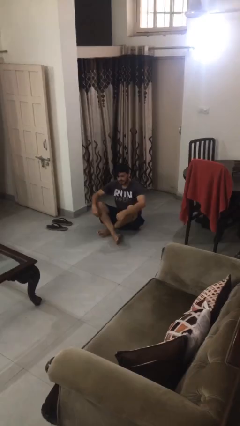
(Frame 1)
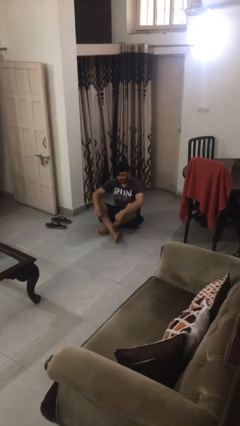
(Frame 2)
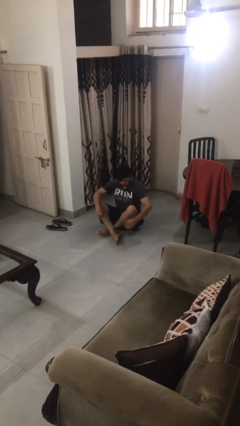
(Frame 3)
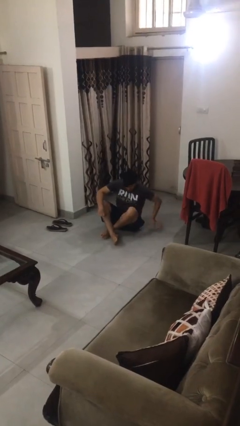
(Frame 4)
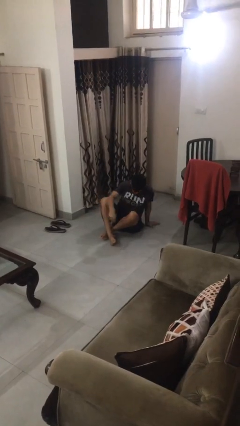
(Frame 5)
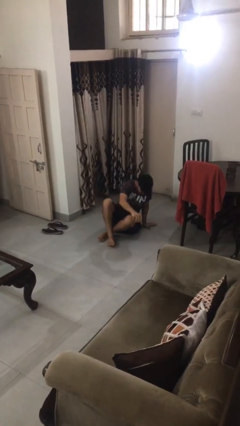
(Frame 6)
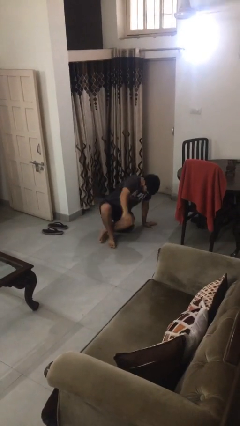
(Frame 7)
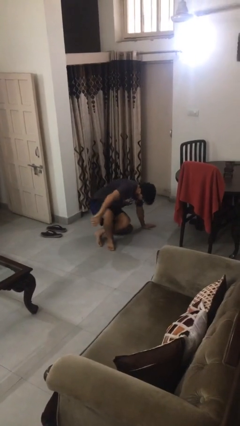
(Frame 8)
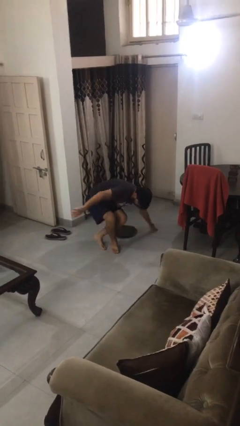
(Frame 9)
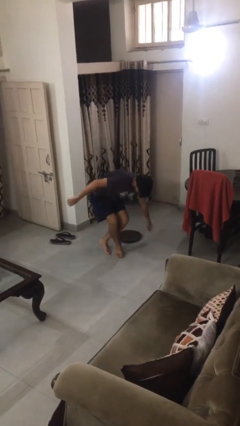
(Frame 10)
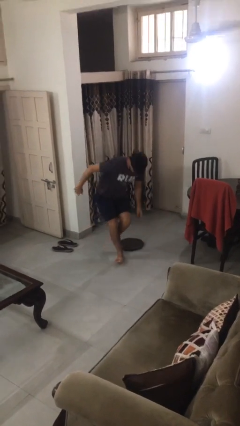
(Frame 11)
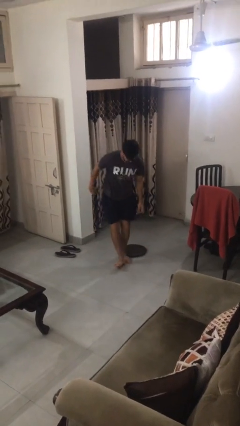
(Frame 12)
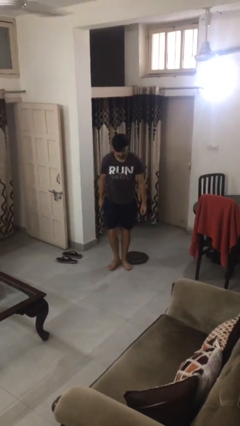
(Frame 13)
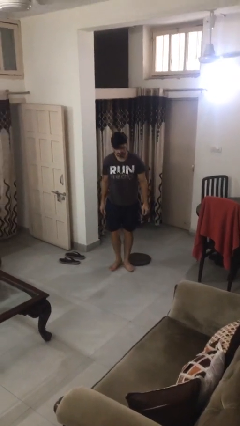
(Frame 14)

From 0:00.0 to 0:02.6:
person stands up from floor

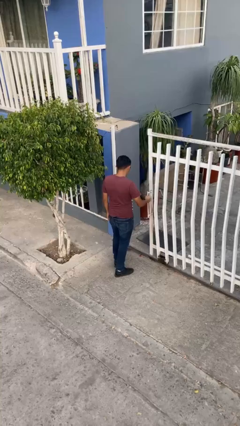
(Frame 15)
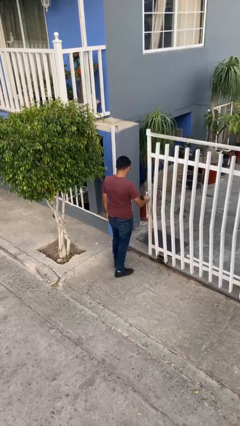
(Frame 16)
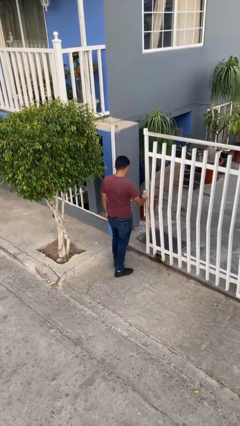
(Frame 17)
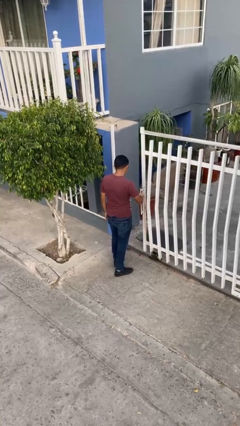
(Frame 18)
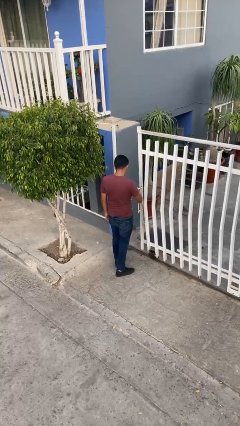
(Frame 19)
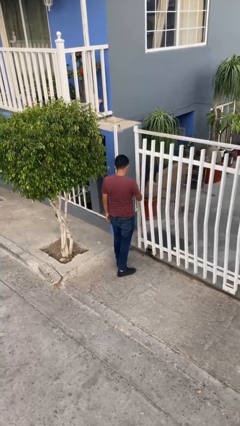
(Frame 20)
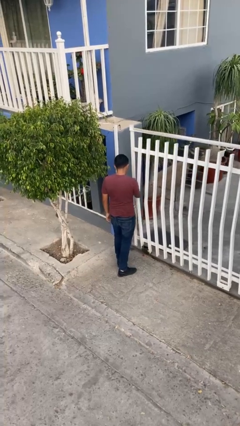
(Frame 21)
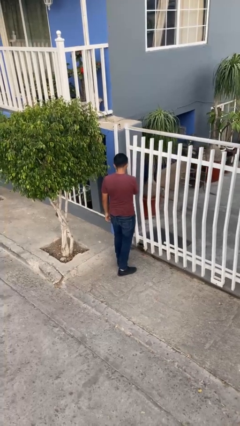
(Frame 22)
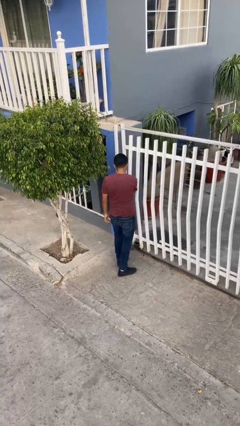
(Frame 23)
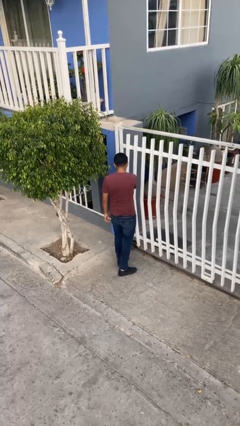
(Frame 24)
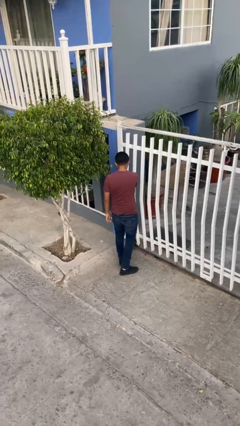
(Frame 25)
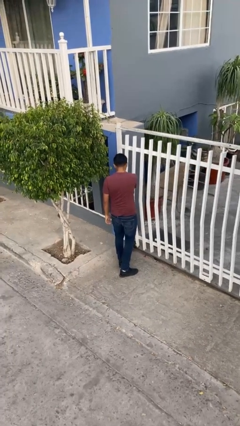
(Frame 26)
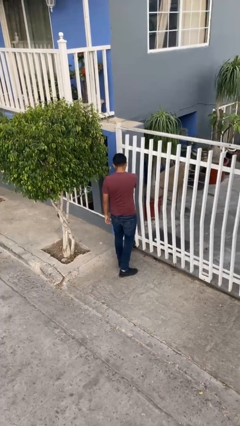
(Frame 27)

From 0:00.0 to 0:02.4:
person closes facility door

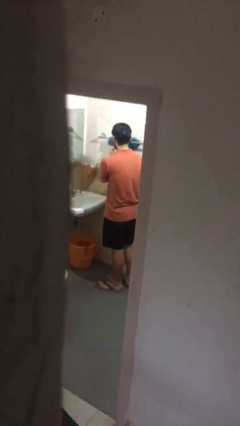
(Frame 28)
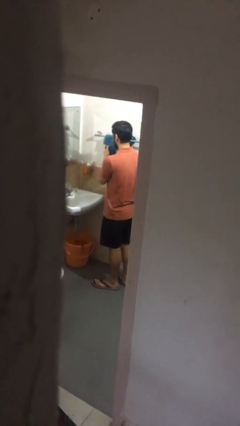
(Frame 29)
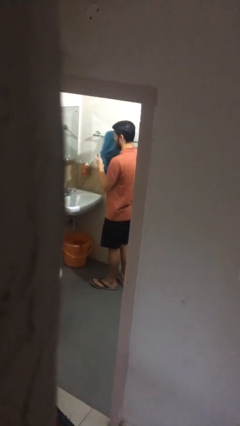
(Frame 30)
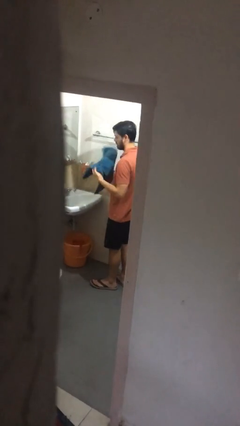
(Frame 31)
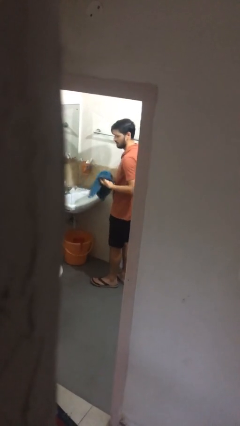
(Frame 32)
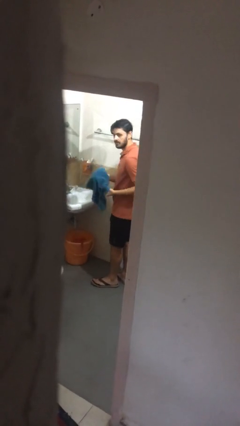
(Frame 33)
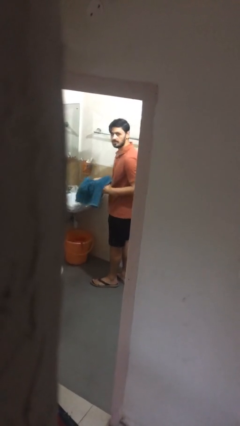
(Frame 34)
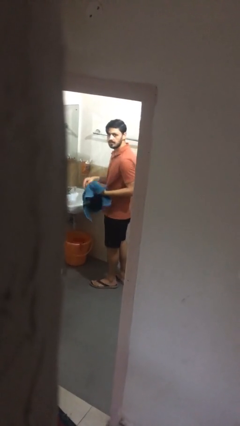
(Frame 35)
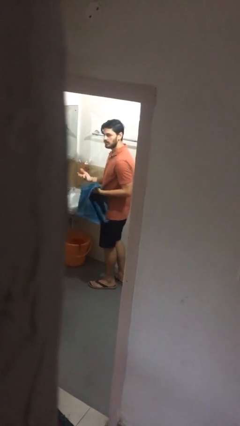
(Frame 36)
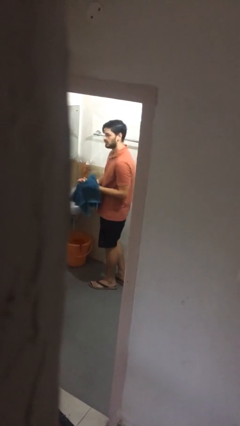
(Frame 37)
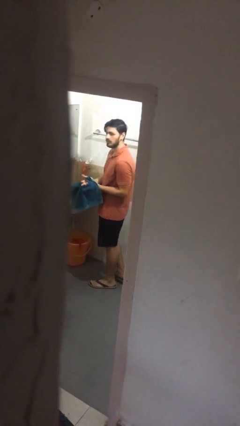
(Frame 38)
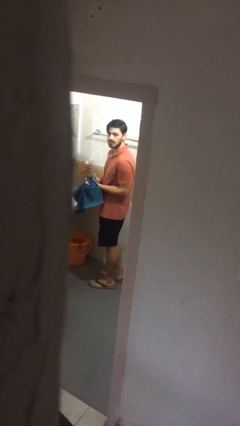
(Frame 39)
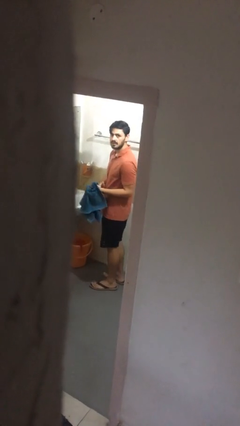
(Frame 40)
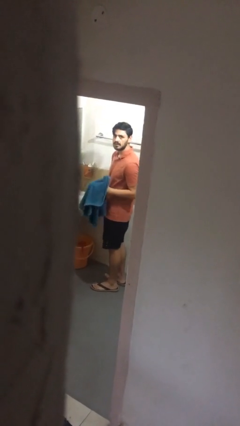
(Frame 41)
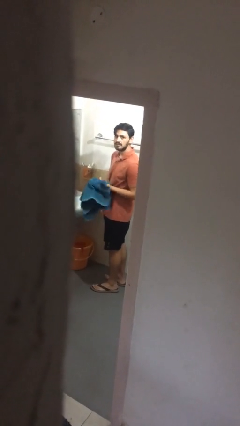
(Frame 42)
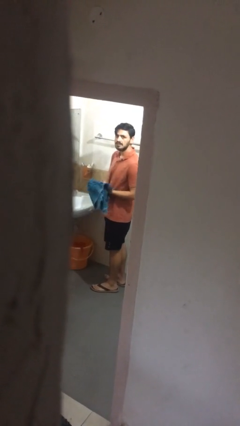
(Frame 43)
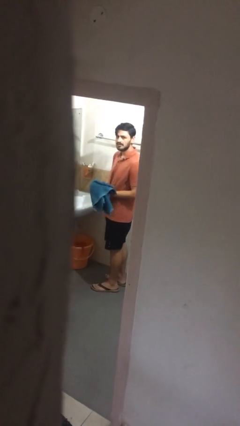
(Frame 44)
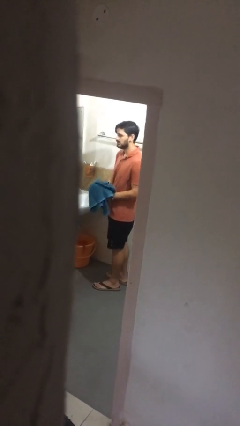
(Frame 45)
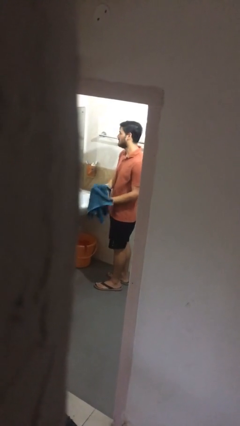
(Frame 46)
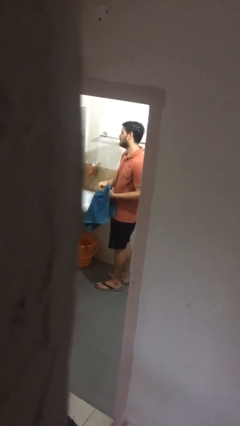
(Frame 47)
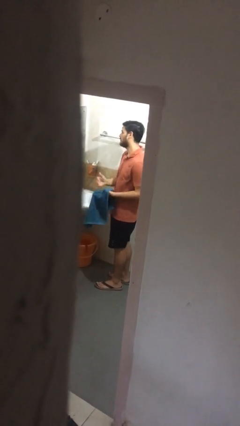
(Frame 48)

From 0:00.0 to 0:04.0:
person dries hands with towel

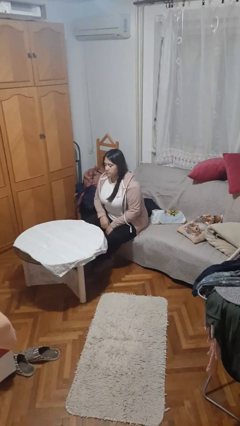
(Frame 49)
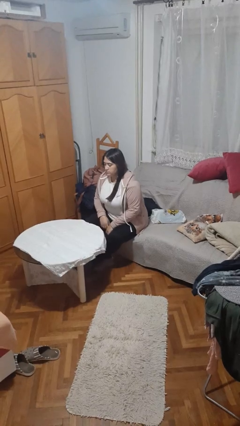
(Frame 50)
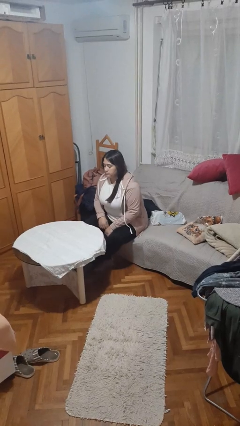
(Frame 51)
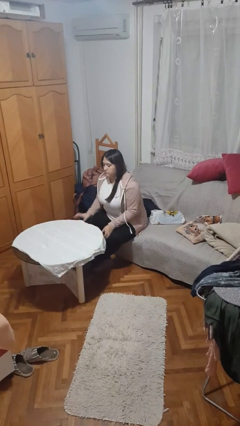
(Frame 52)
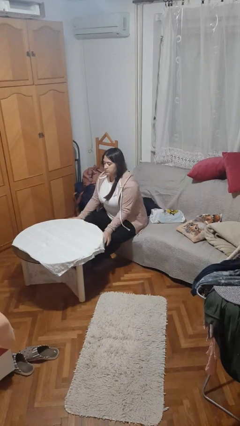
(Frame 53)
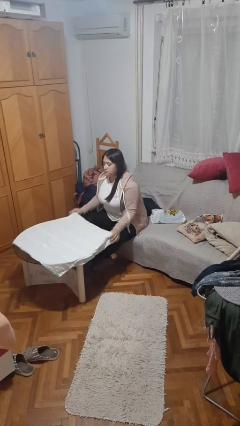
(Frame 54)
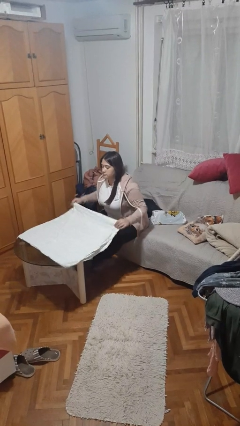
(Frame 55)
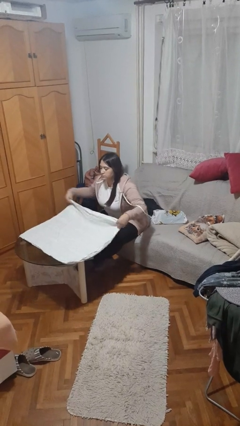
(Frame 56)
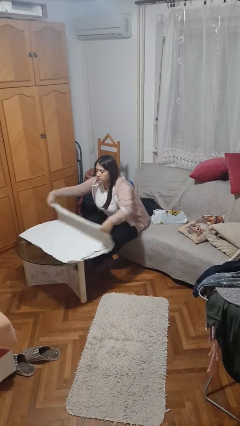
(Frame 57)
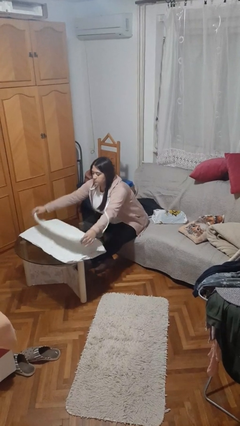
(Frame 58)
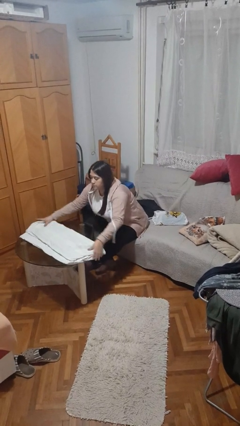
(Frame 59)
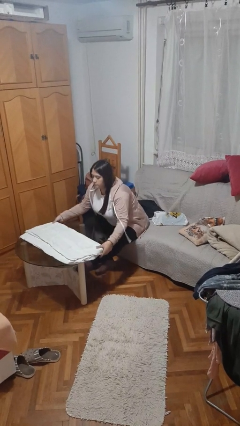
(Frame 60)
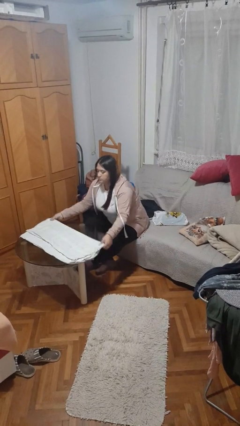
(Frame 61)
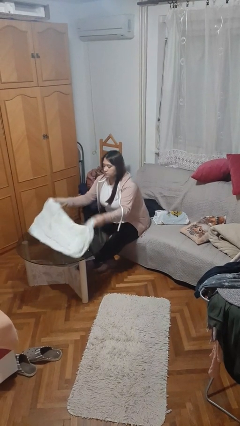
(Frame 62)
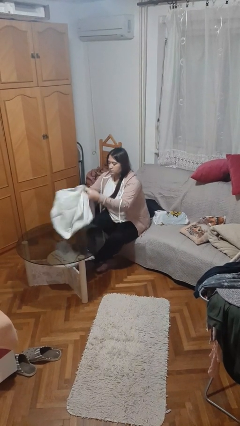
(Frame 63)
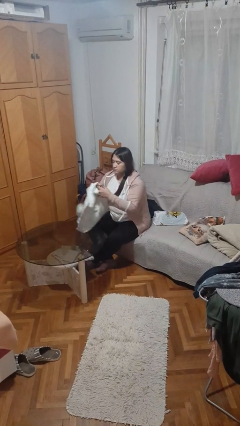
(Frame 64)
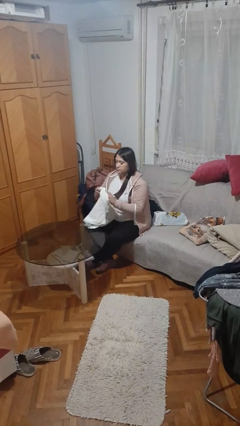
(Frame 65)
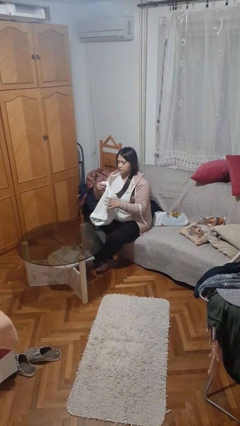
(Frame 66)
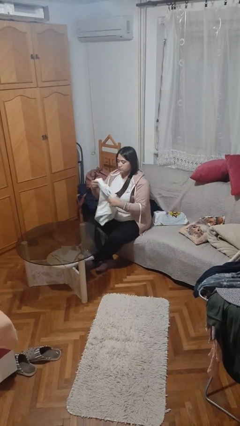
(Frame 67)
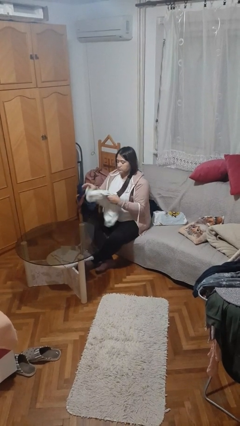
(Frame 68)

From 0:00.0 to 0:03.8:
person folds tablecloth

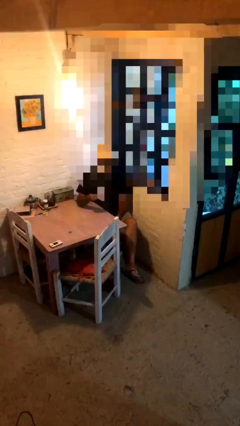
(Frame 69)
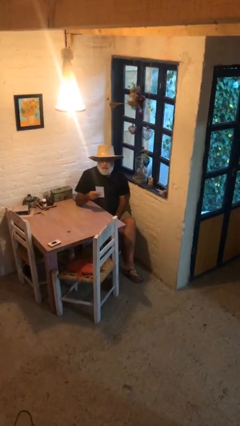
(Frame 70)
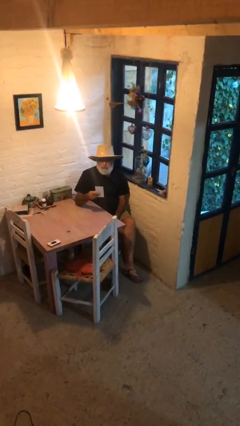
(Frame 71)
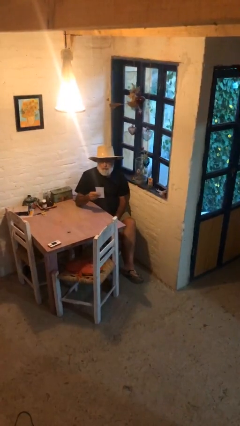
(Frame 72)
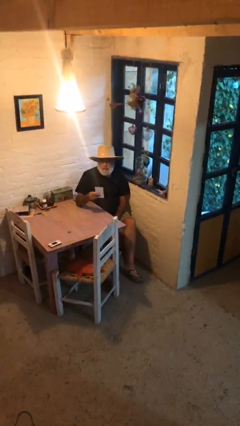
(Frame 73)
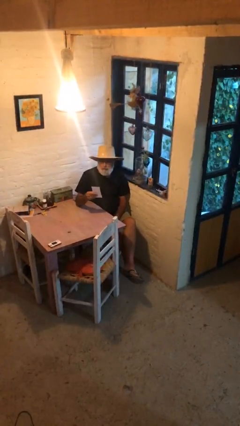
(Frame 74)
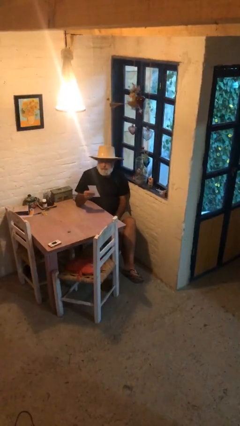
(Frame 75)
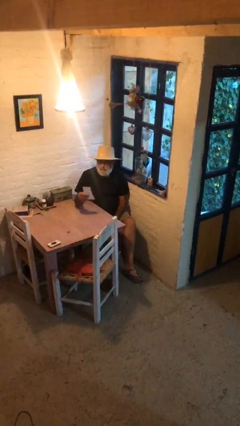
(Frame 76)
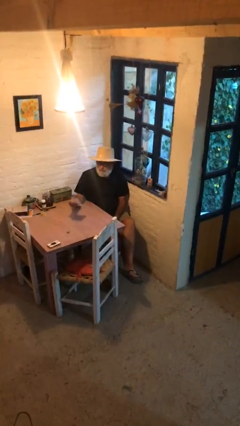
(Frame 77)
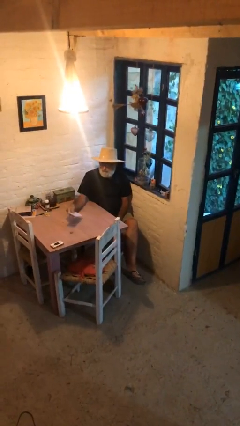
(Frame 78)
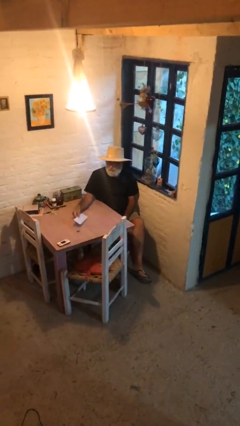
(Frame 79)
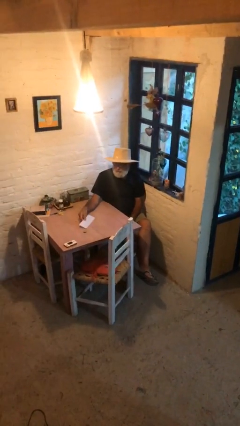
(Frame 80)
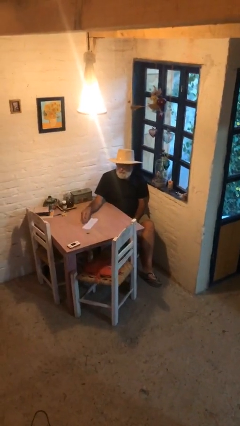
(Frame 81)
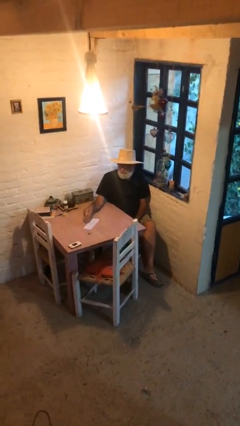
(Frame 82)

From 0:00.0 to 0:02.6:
person puts down object on table

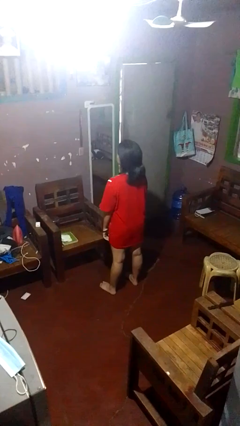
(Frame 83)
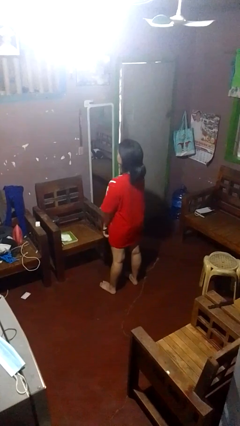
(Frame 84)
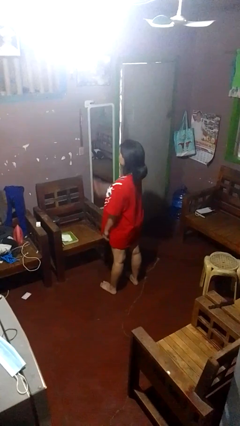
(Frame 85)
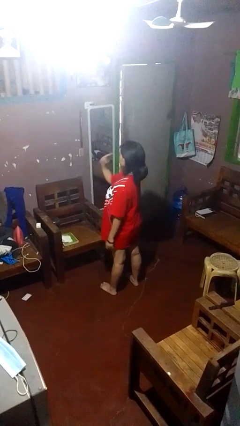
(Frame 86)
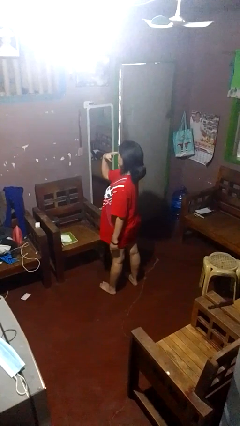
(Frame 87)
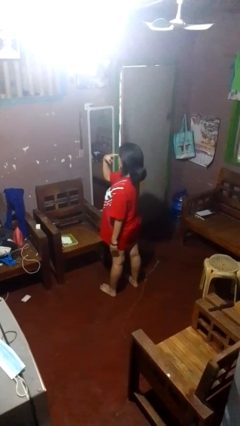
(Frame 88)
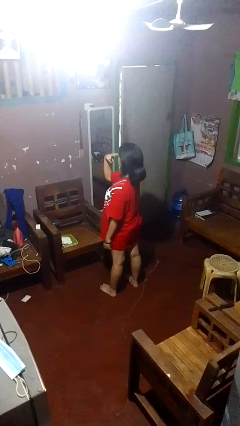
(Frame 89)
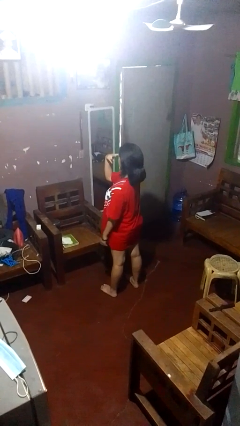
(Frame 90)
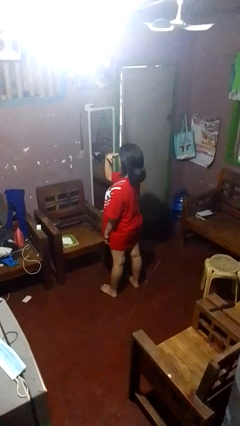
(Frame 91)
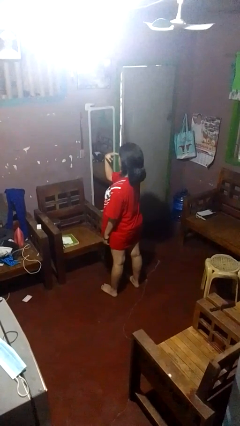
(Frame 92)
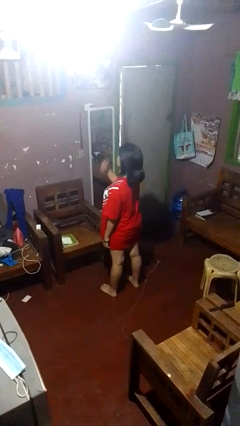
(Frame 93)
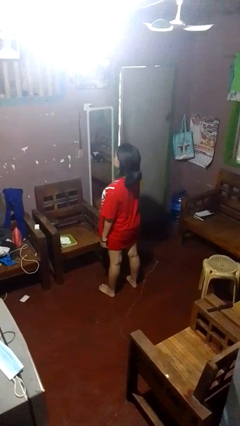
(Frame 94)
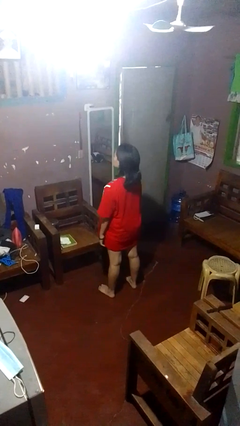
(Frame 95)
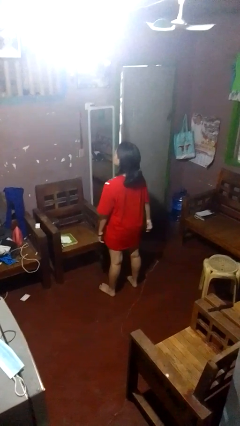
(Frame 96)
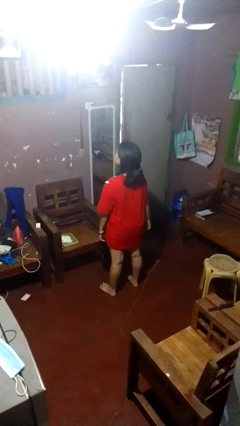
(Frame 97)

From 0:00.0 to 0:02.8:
person gestures watch closely
